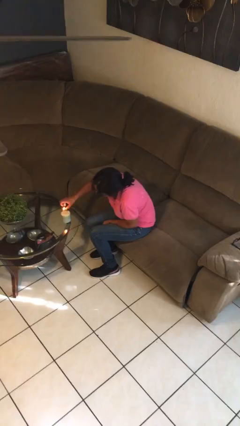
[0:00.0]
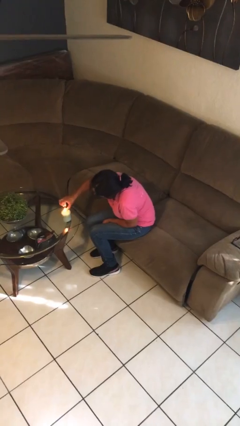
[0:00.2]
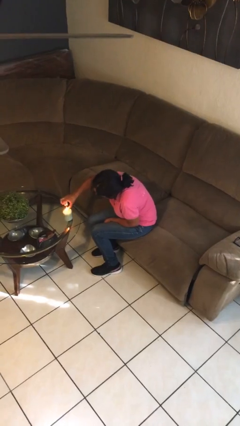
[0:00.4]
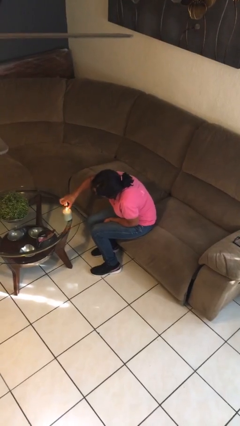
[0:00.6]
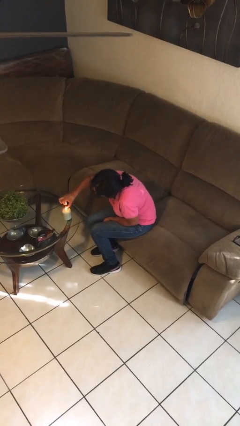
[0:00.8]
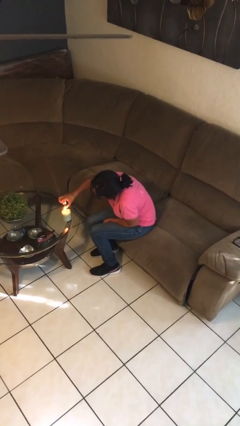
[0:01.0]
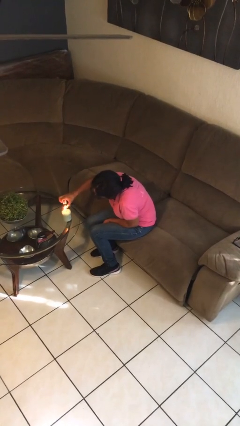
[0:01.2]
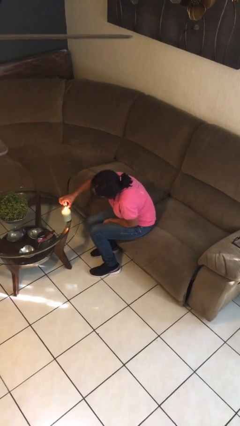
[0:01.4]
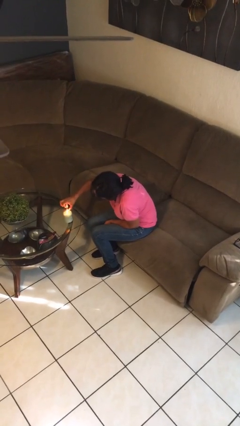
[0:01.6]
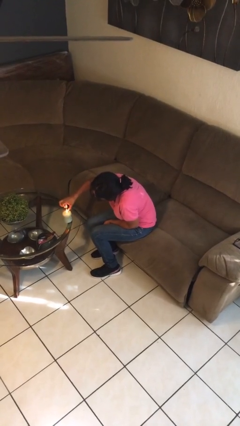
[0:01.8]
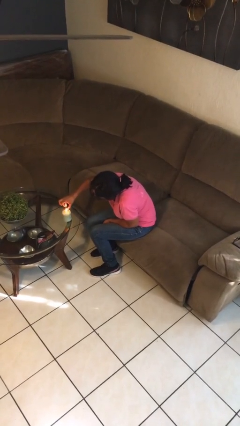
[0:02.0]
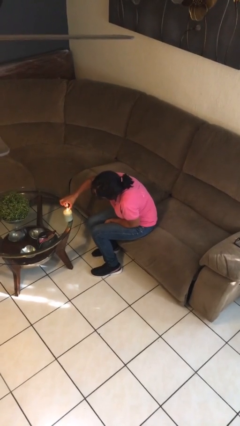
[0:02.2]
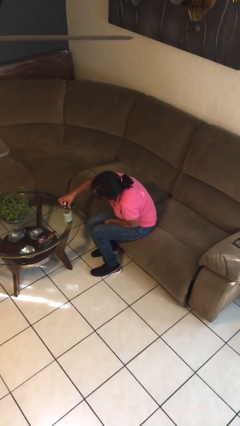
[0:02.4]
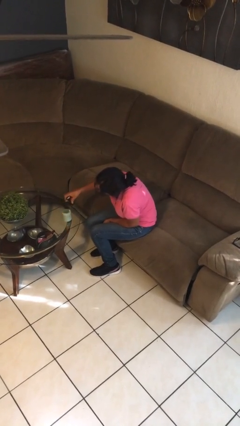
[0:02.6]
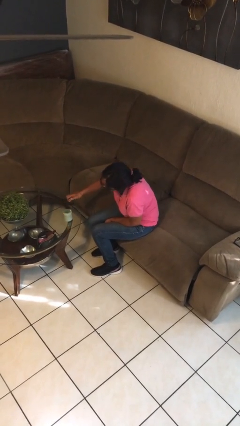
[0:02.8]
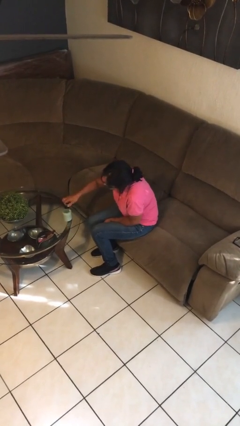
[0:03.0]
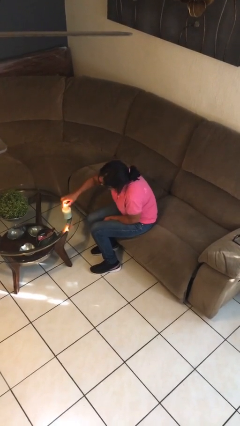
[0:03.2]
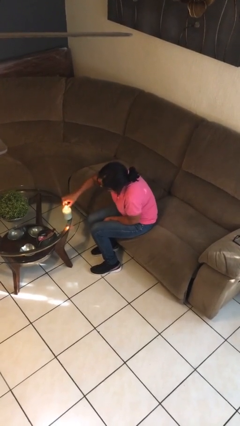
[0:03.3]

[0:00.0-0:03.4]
person lights candle

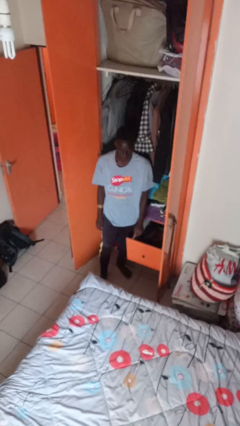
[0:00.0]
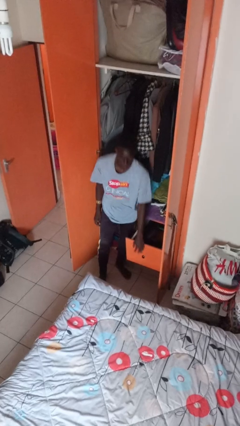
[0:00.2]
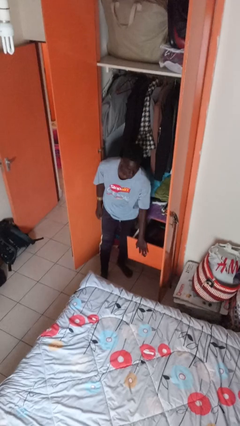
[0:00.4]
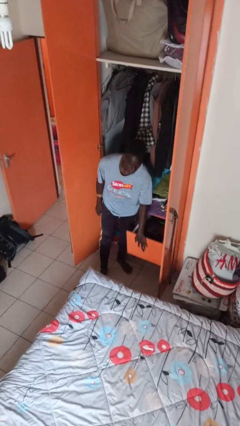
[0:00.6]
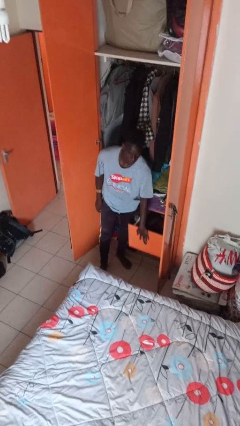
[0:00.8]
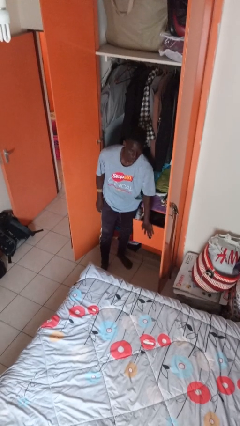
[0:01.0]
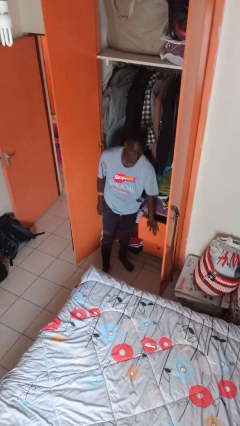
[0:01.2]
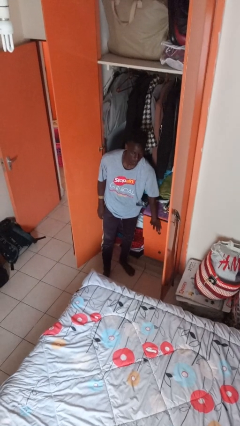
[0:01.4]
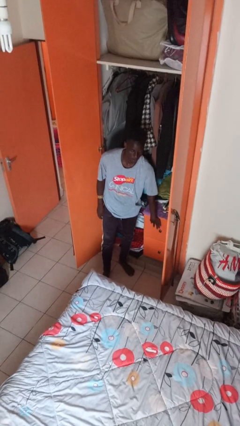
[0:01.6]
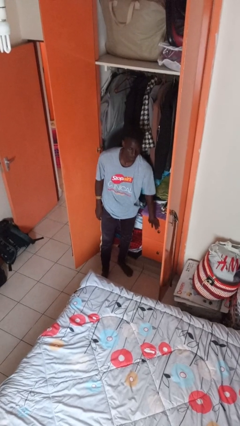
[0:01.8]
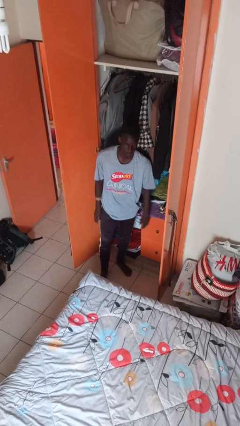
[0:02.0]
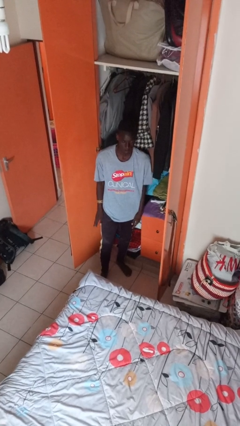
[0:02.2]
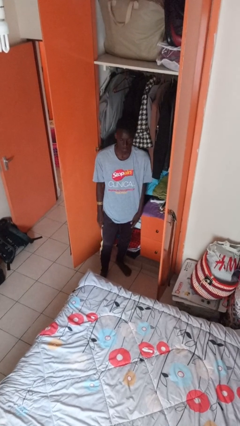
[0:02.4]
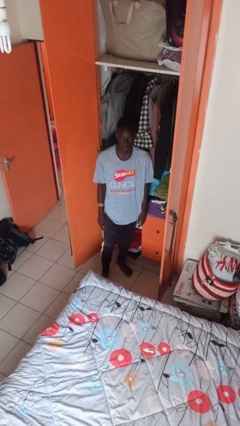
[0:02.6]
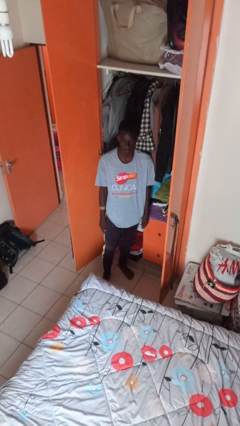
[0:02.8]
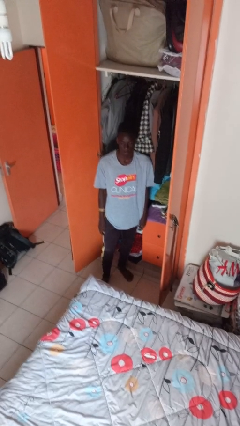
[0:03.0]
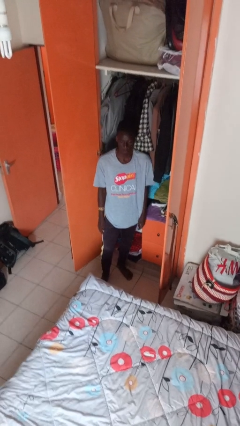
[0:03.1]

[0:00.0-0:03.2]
person closes dresser drawer

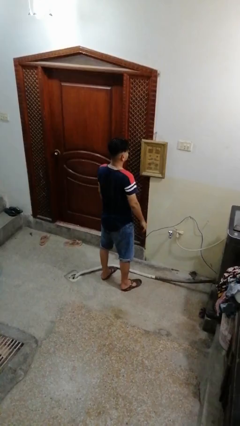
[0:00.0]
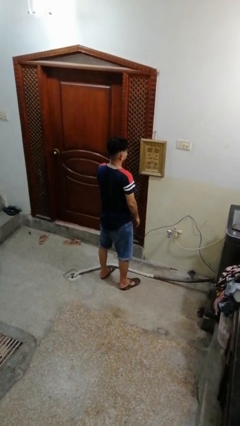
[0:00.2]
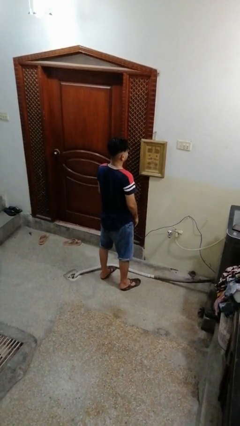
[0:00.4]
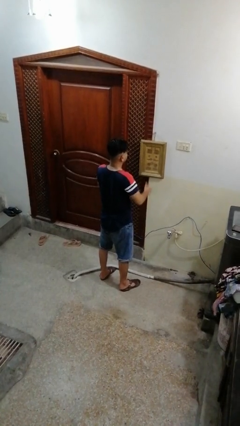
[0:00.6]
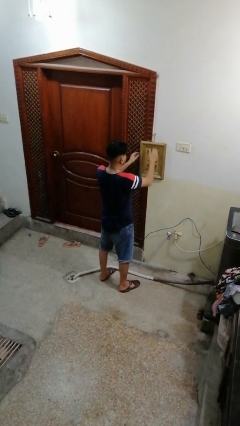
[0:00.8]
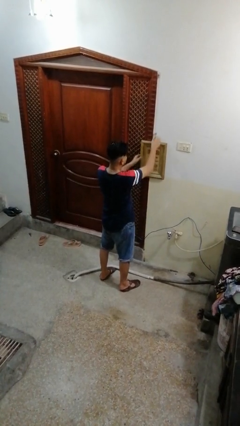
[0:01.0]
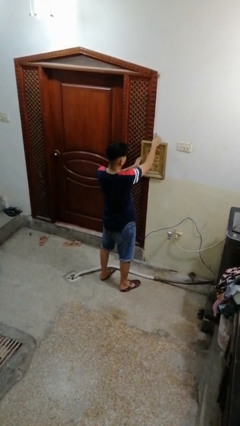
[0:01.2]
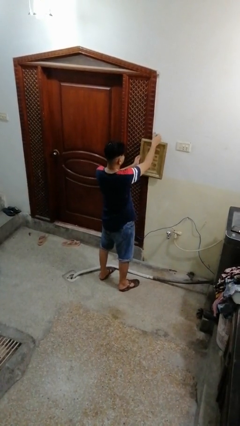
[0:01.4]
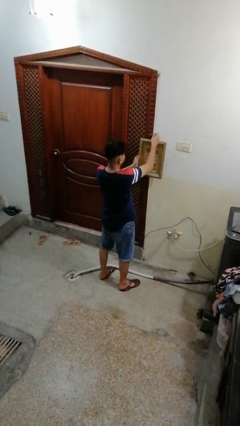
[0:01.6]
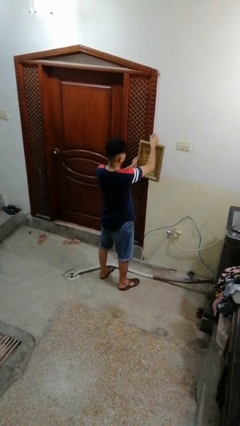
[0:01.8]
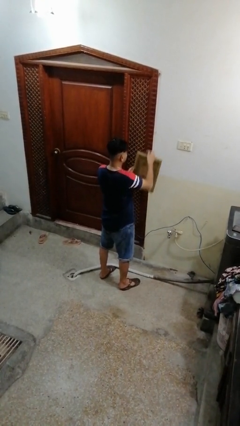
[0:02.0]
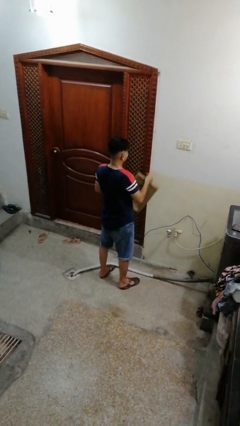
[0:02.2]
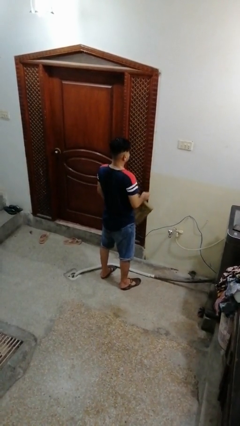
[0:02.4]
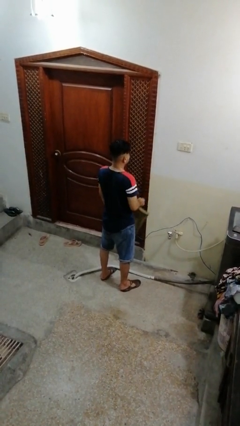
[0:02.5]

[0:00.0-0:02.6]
person takes down picture frame

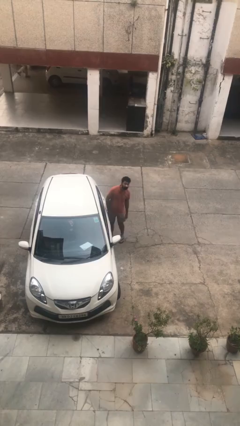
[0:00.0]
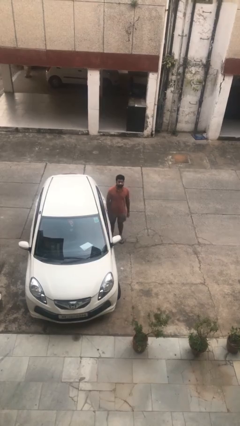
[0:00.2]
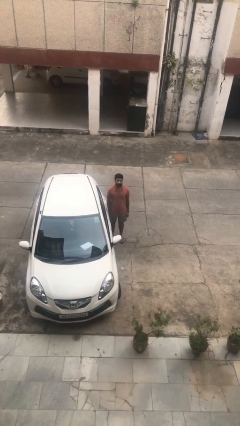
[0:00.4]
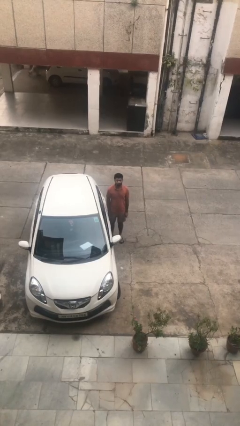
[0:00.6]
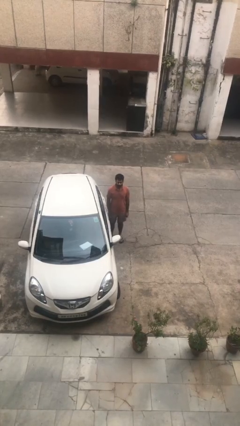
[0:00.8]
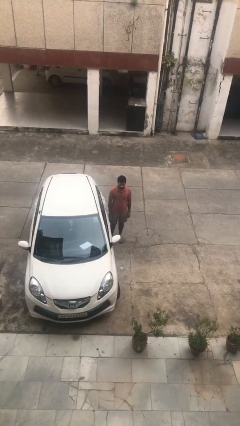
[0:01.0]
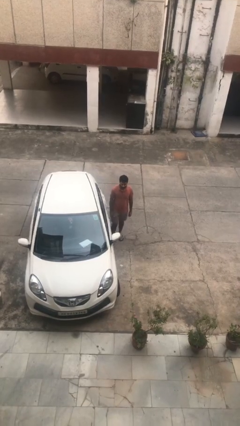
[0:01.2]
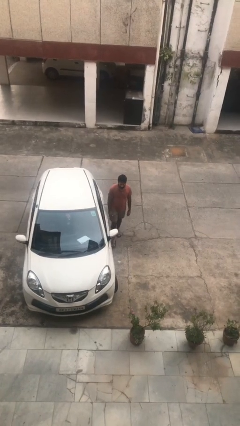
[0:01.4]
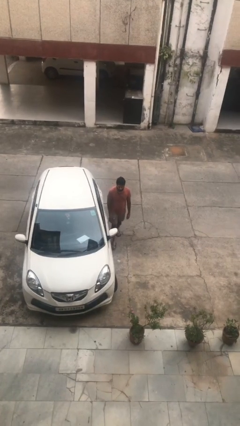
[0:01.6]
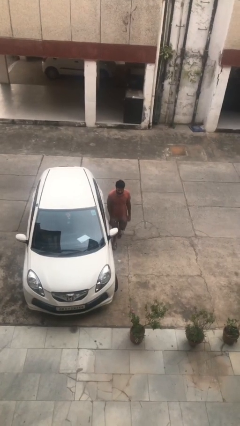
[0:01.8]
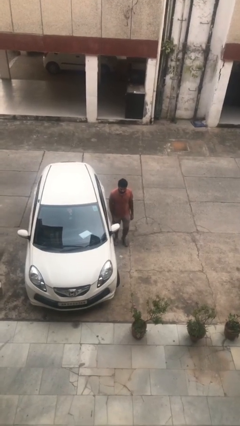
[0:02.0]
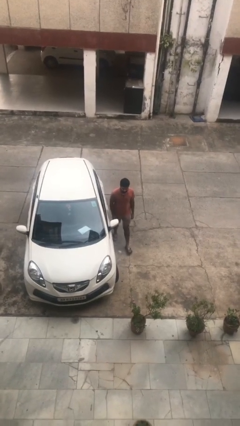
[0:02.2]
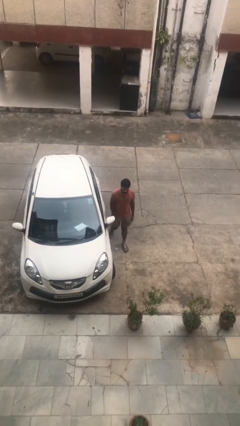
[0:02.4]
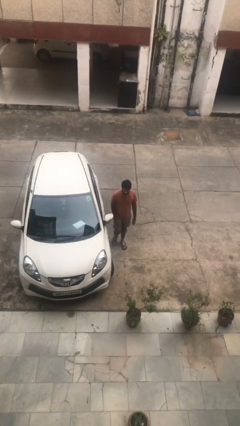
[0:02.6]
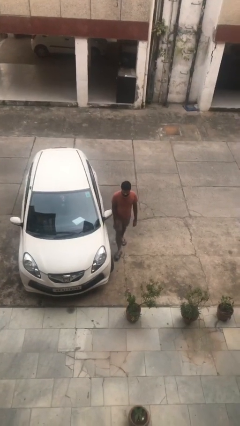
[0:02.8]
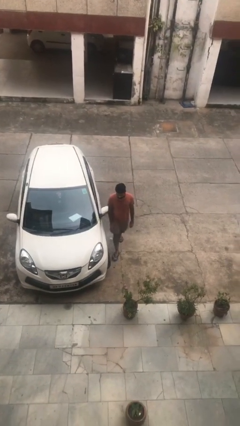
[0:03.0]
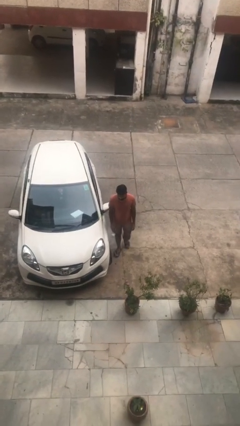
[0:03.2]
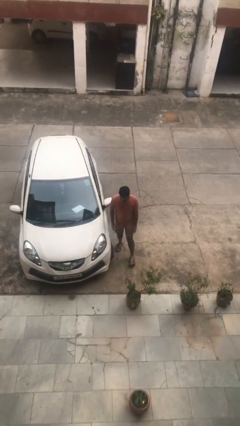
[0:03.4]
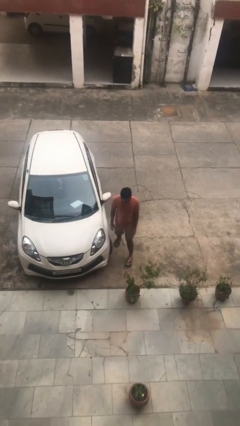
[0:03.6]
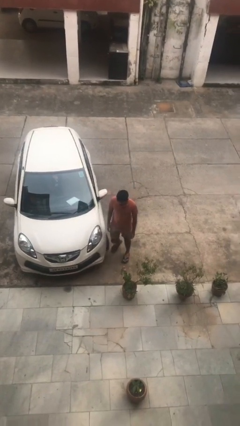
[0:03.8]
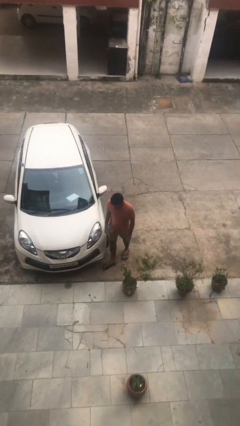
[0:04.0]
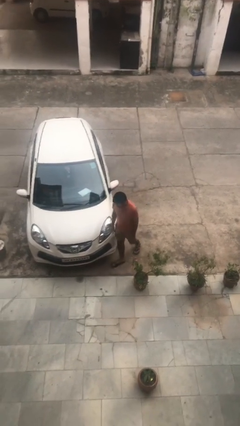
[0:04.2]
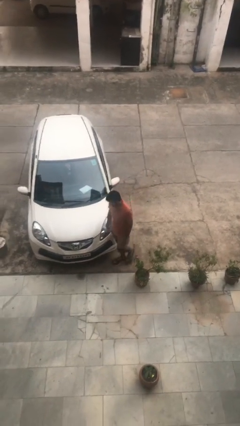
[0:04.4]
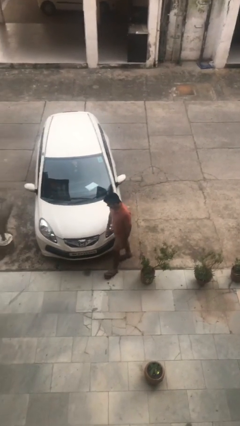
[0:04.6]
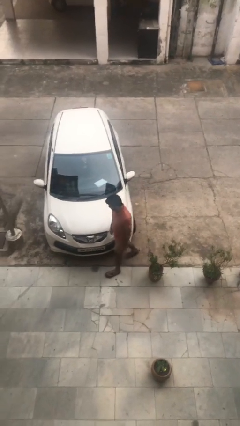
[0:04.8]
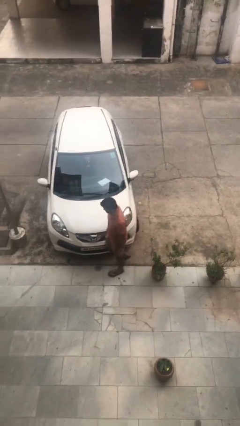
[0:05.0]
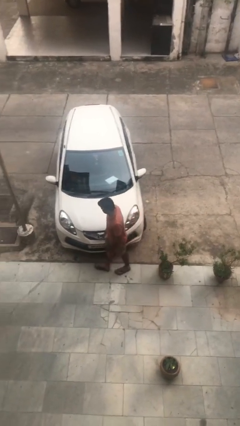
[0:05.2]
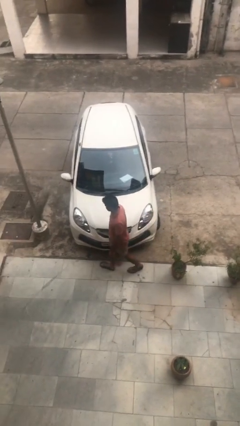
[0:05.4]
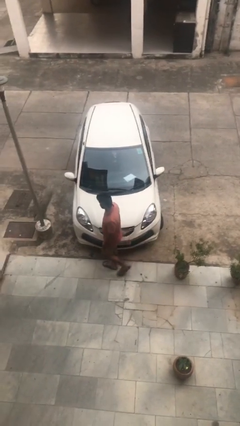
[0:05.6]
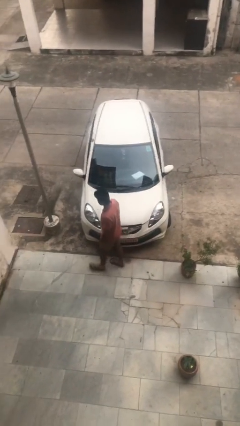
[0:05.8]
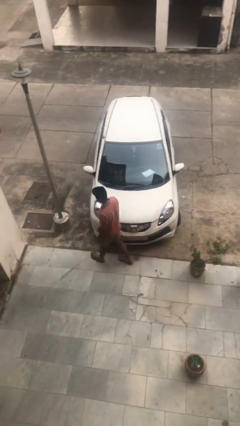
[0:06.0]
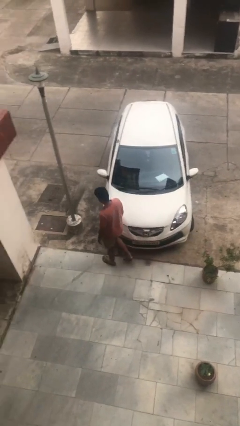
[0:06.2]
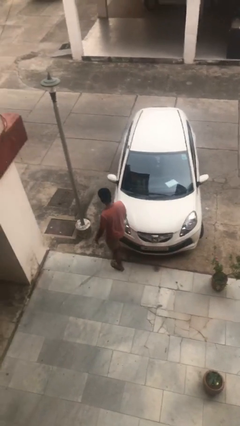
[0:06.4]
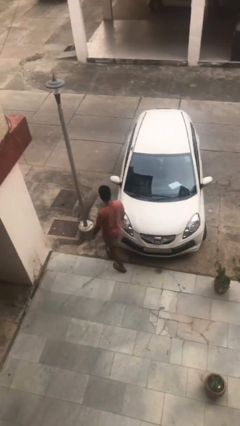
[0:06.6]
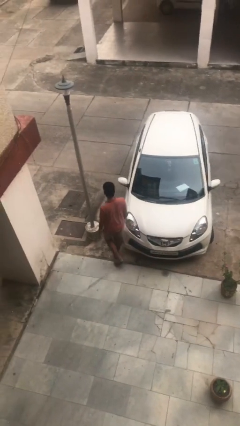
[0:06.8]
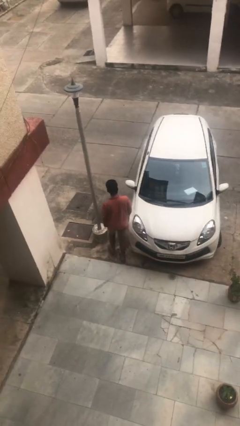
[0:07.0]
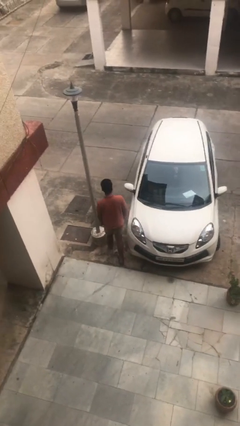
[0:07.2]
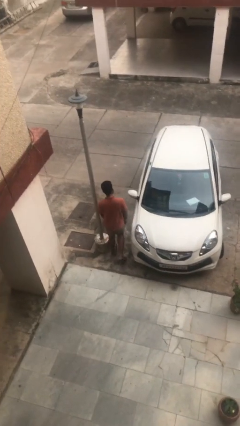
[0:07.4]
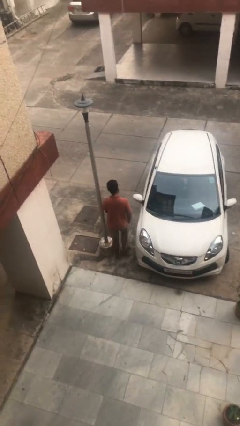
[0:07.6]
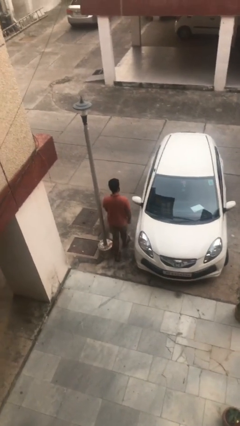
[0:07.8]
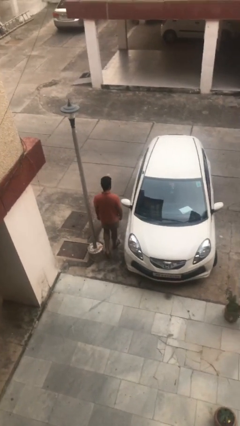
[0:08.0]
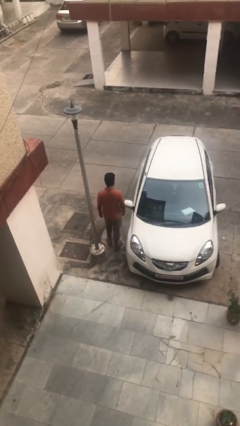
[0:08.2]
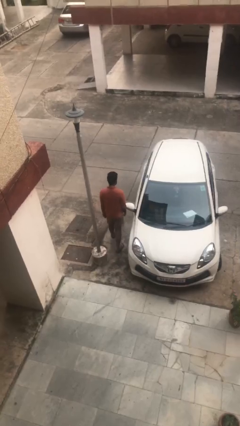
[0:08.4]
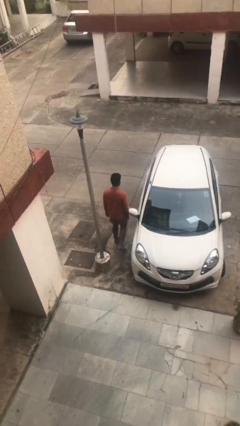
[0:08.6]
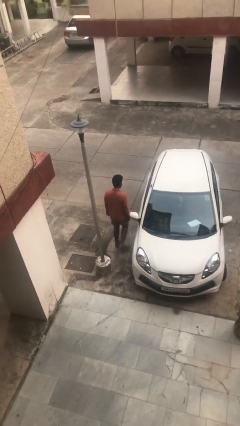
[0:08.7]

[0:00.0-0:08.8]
person walks around car
